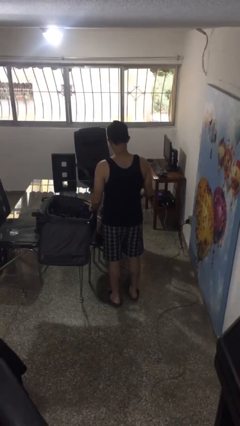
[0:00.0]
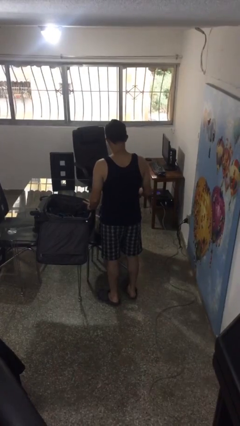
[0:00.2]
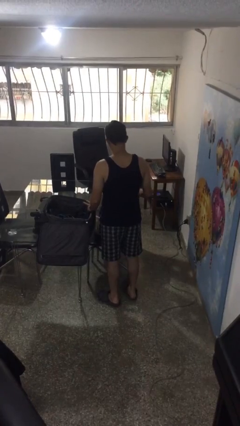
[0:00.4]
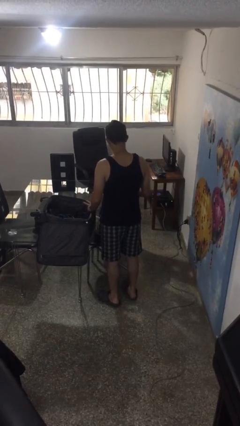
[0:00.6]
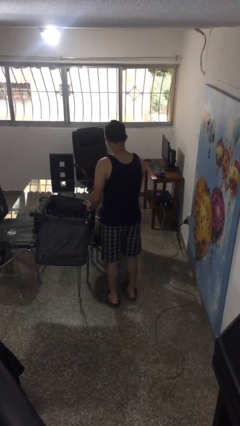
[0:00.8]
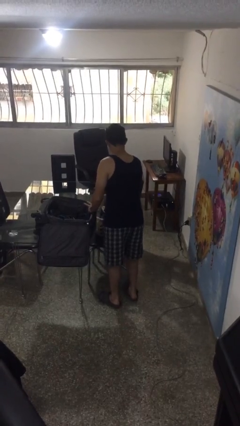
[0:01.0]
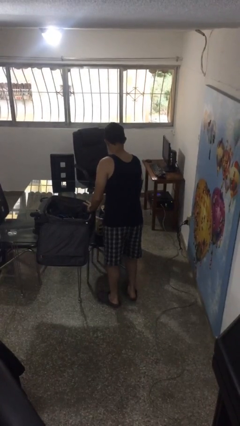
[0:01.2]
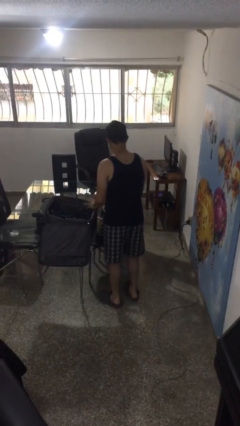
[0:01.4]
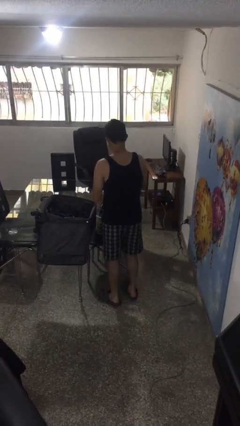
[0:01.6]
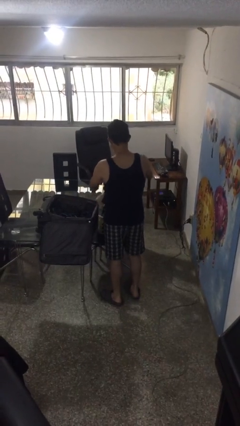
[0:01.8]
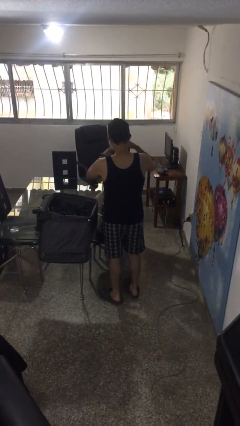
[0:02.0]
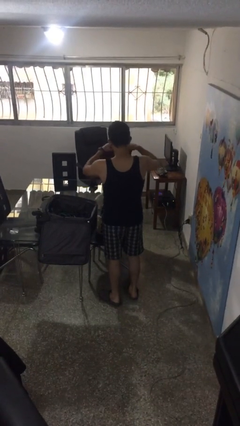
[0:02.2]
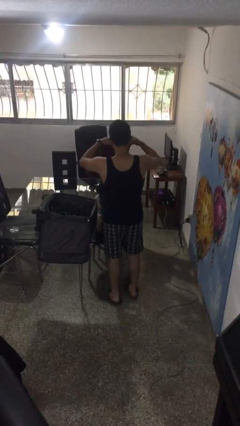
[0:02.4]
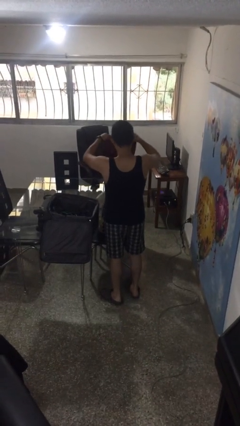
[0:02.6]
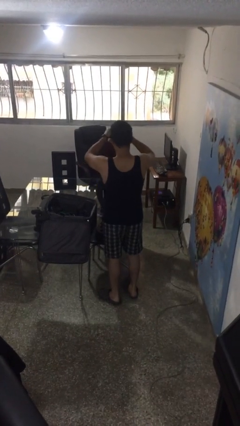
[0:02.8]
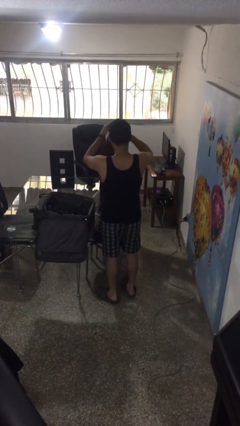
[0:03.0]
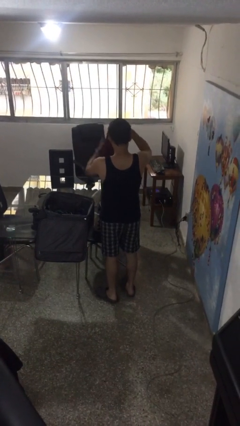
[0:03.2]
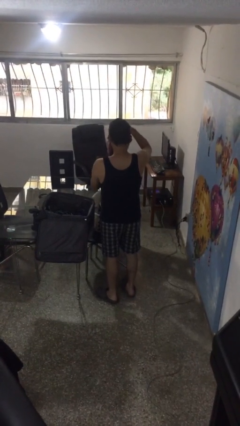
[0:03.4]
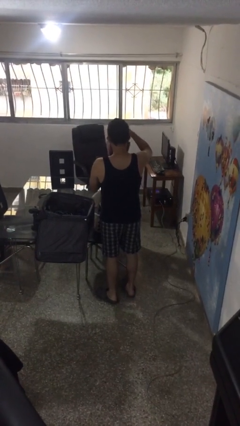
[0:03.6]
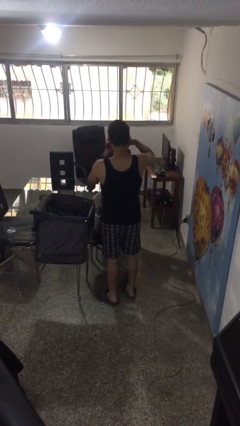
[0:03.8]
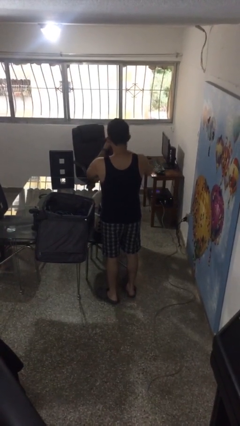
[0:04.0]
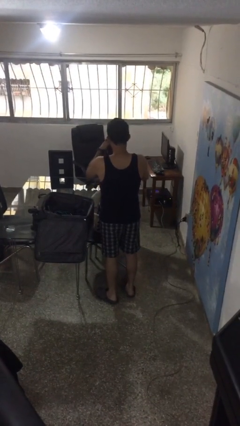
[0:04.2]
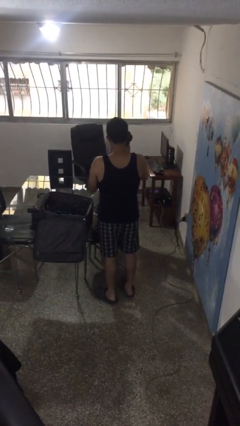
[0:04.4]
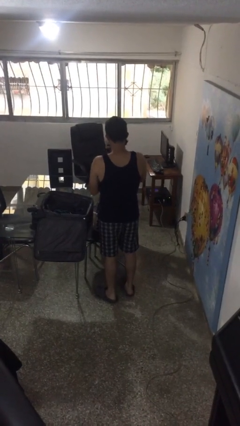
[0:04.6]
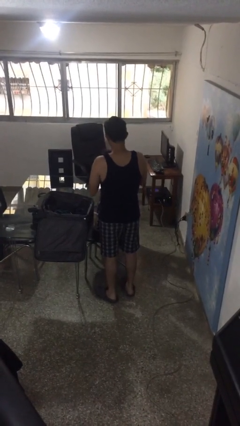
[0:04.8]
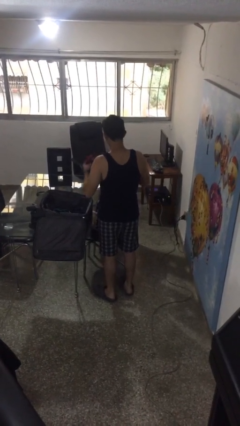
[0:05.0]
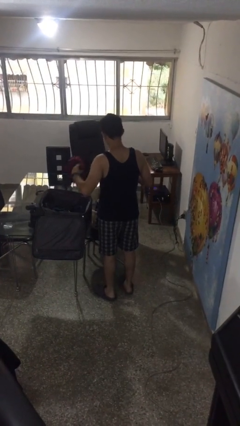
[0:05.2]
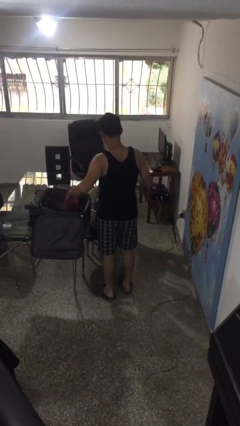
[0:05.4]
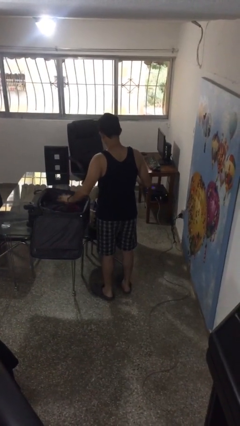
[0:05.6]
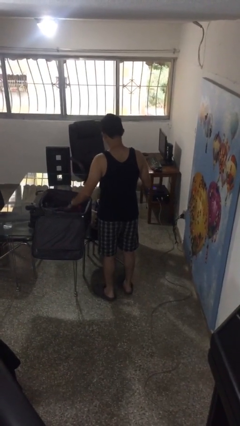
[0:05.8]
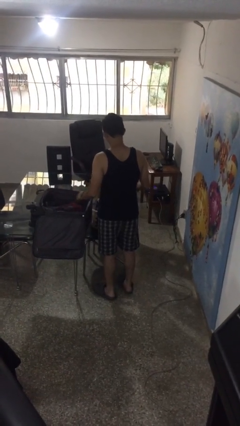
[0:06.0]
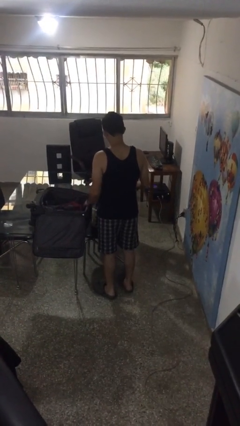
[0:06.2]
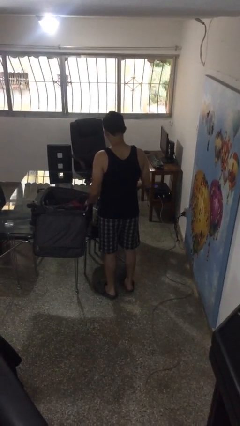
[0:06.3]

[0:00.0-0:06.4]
person loads clothes into suitcase

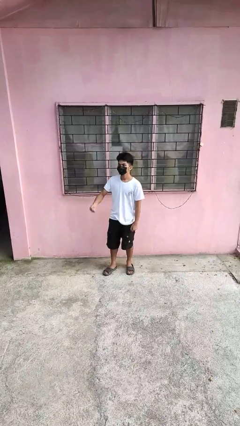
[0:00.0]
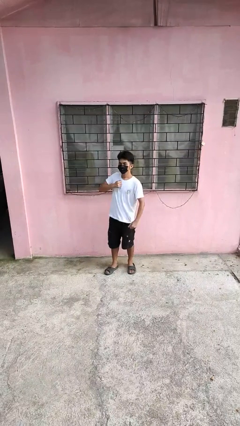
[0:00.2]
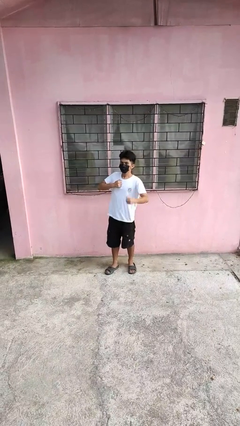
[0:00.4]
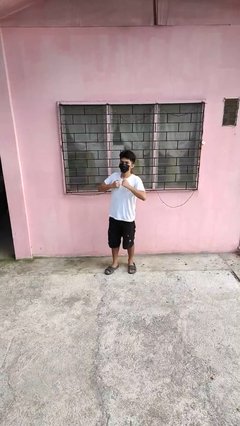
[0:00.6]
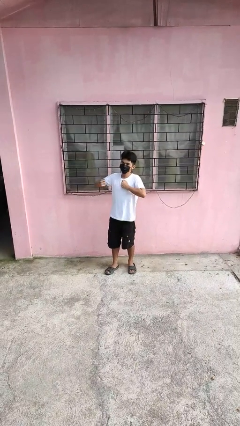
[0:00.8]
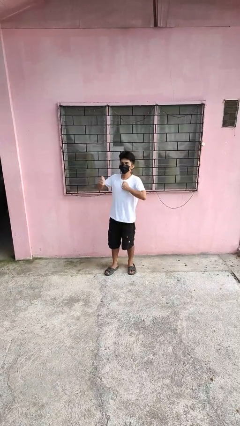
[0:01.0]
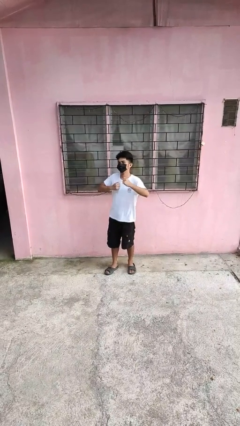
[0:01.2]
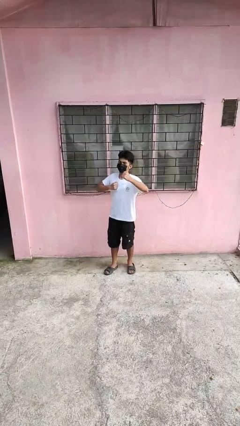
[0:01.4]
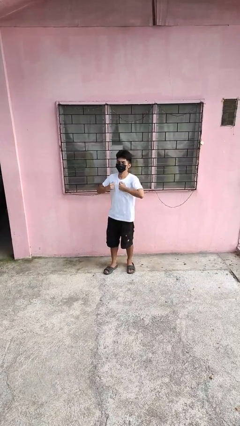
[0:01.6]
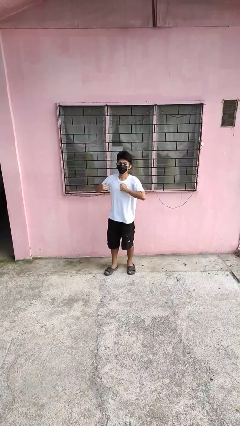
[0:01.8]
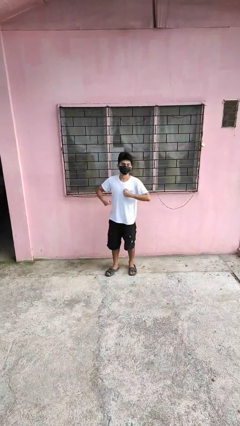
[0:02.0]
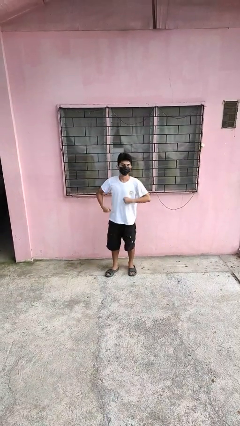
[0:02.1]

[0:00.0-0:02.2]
person drums on chest

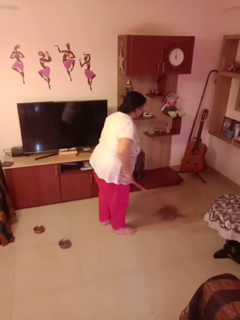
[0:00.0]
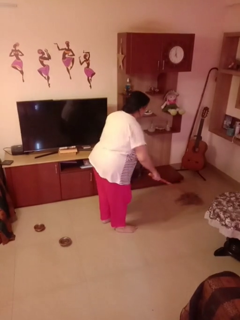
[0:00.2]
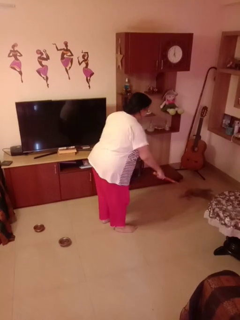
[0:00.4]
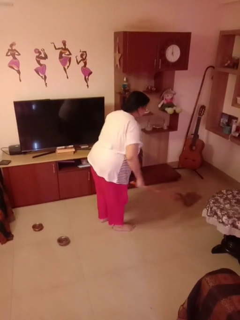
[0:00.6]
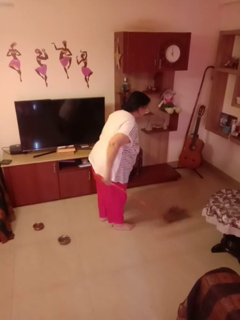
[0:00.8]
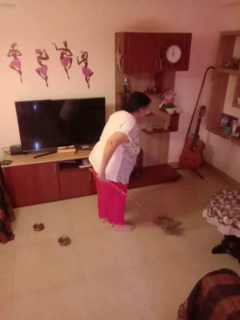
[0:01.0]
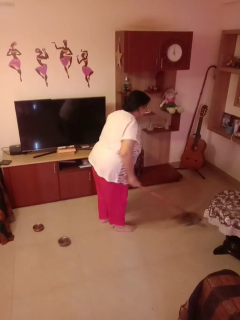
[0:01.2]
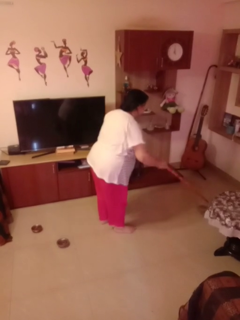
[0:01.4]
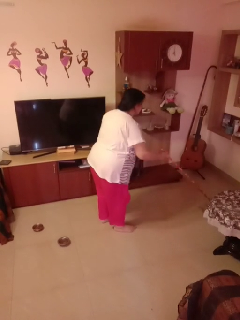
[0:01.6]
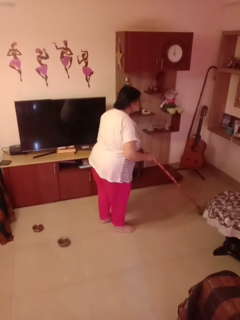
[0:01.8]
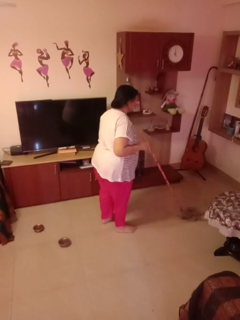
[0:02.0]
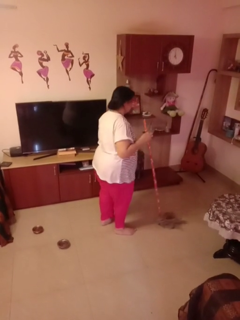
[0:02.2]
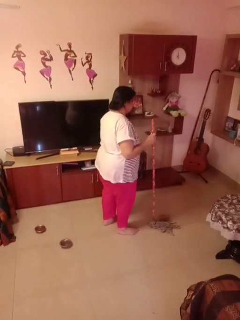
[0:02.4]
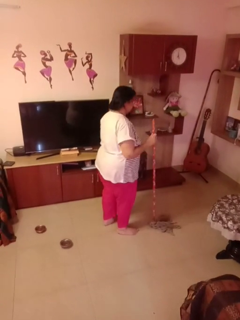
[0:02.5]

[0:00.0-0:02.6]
person mops

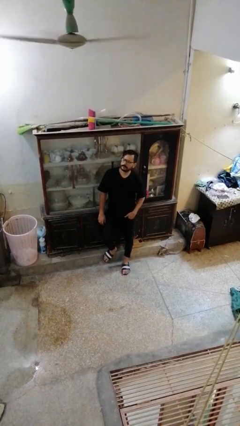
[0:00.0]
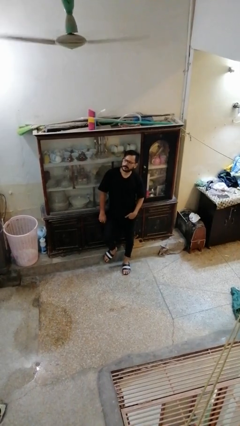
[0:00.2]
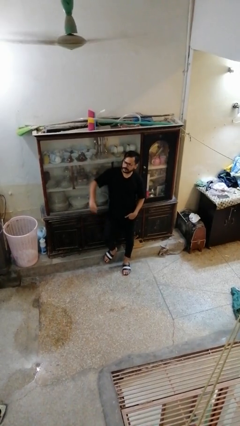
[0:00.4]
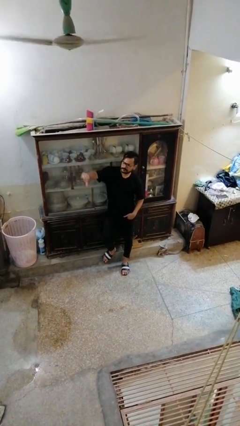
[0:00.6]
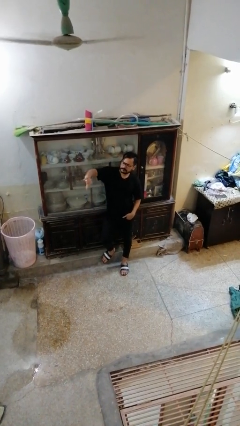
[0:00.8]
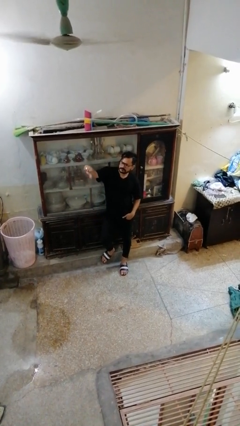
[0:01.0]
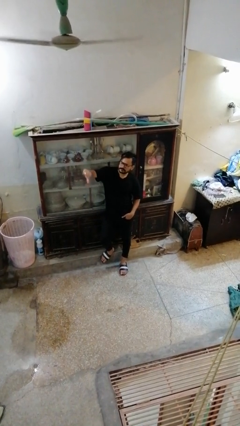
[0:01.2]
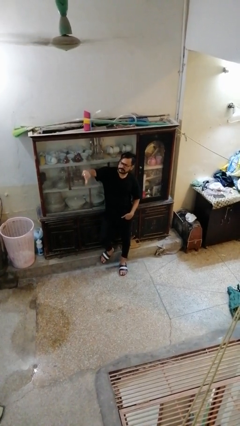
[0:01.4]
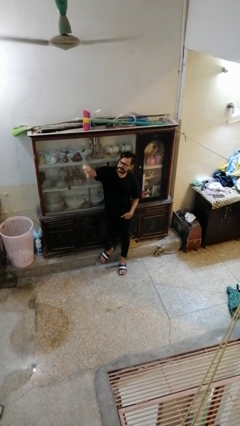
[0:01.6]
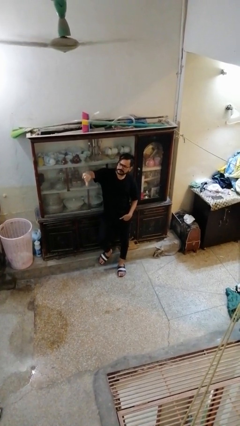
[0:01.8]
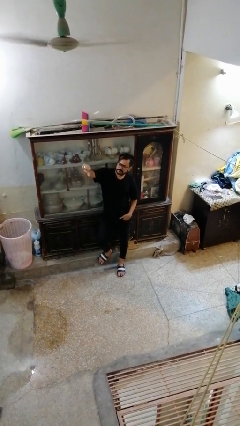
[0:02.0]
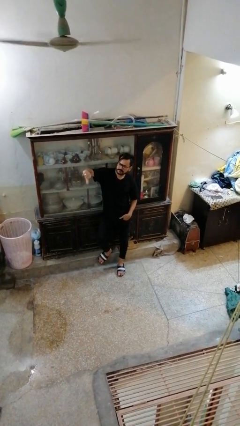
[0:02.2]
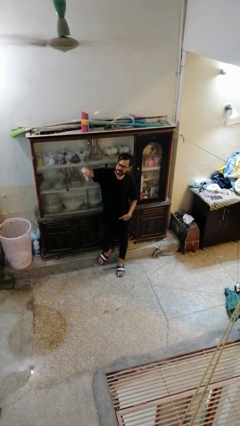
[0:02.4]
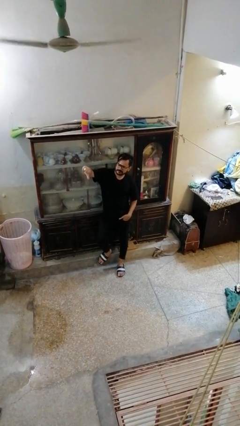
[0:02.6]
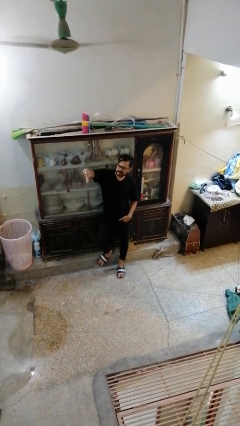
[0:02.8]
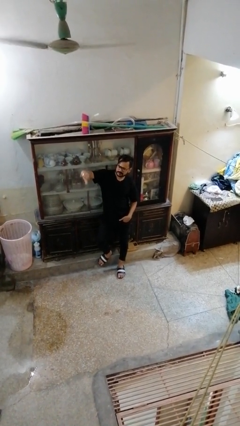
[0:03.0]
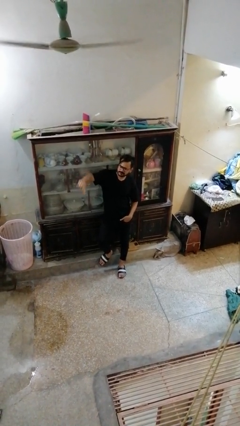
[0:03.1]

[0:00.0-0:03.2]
person gestures thumbs down

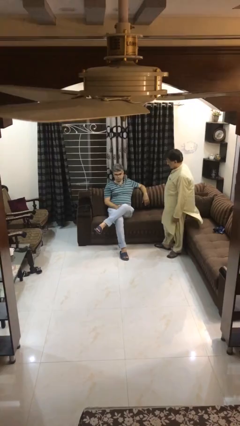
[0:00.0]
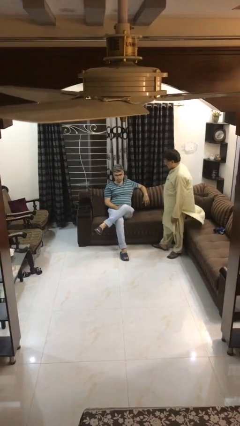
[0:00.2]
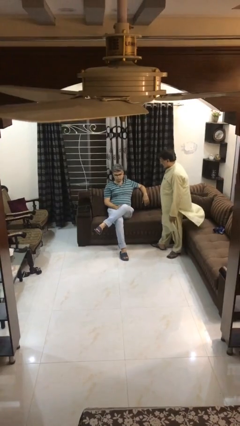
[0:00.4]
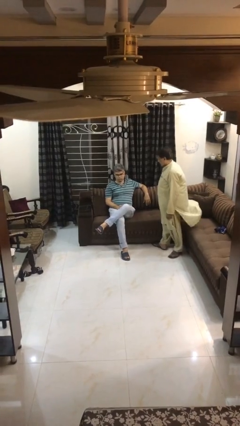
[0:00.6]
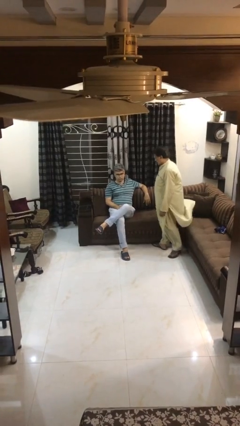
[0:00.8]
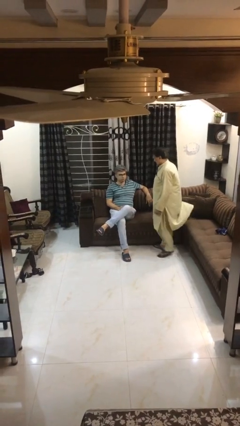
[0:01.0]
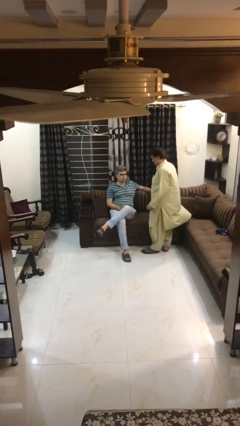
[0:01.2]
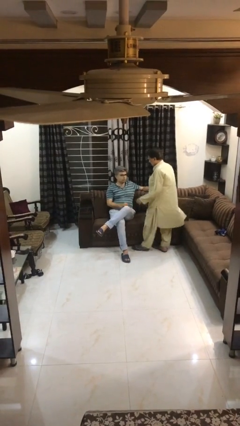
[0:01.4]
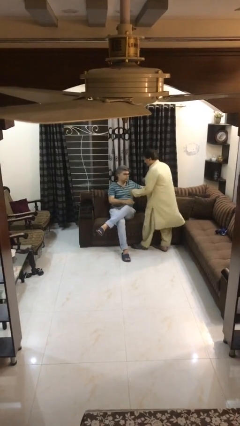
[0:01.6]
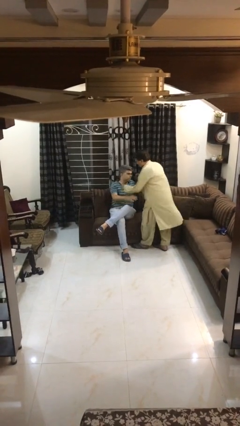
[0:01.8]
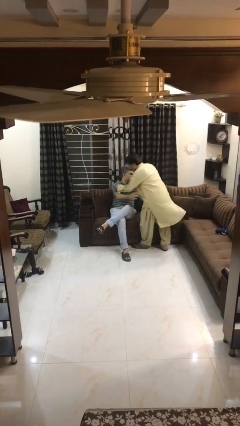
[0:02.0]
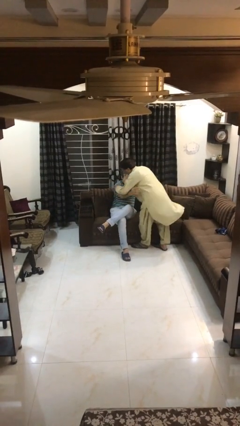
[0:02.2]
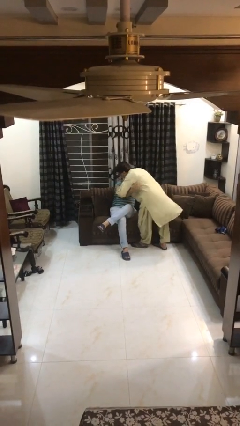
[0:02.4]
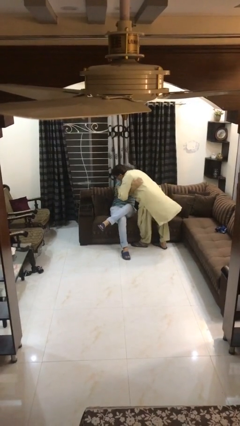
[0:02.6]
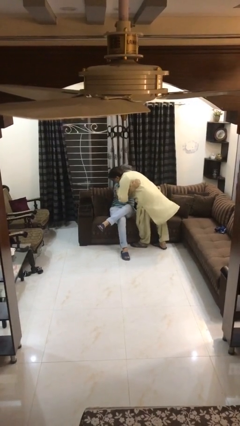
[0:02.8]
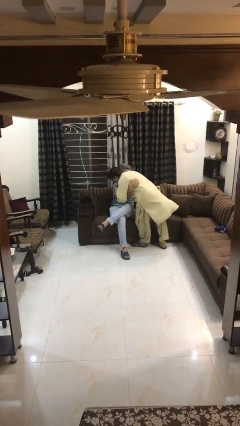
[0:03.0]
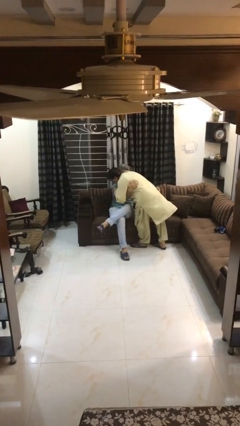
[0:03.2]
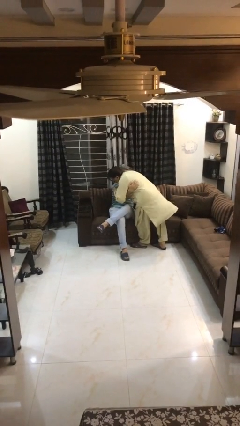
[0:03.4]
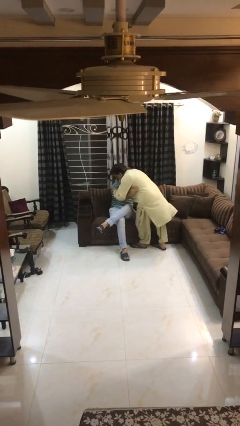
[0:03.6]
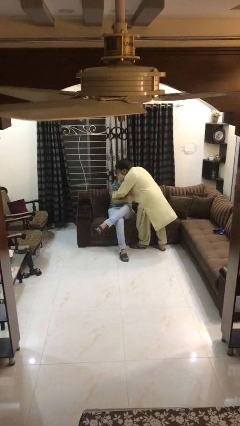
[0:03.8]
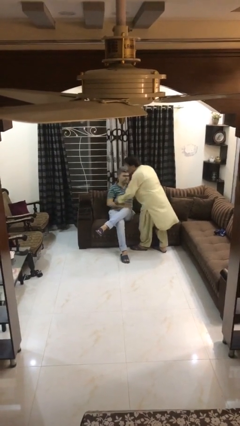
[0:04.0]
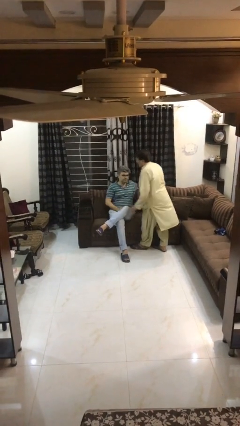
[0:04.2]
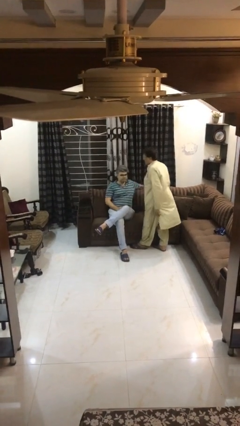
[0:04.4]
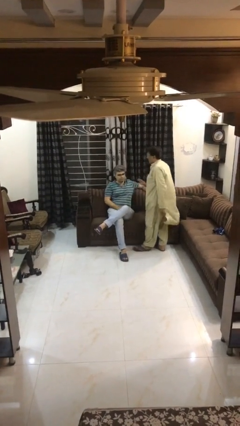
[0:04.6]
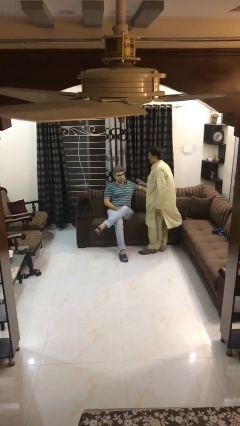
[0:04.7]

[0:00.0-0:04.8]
person embraces person
